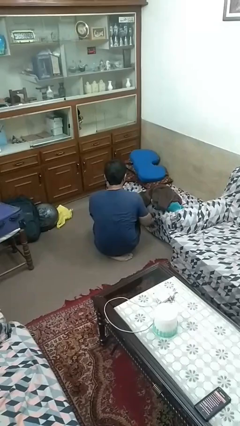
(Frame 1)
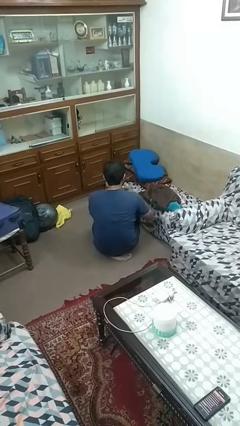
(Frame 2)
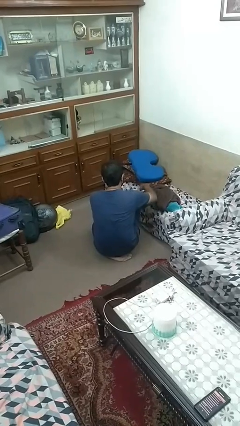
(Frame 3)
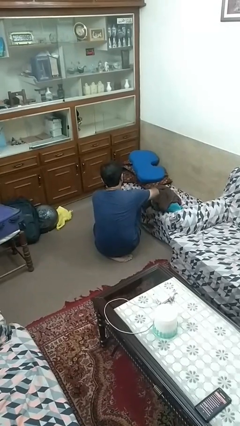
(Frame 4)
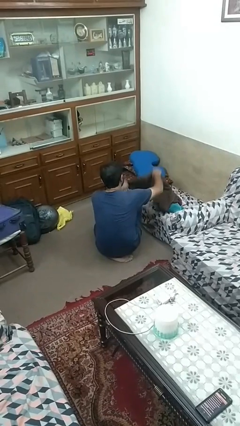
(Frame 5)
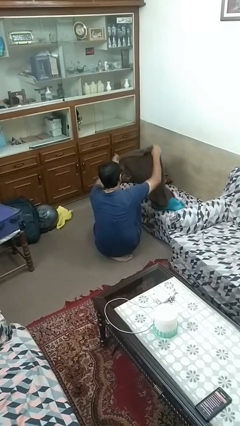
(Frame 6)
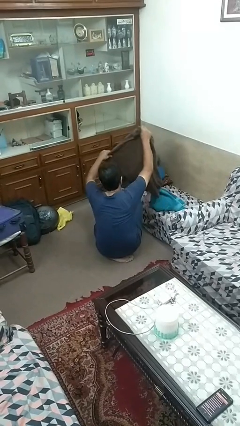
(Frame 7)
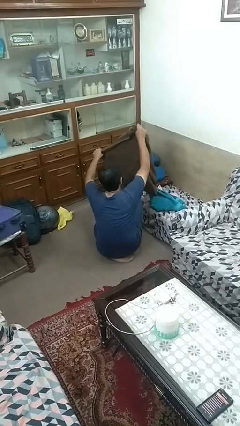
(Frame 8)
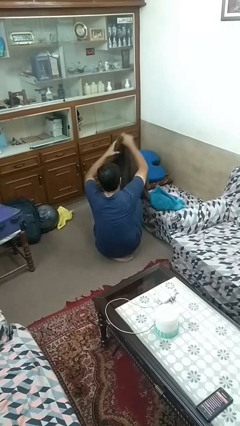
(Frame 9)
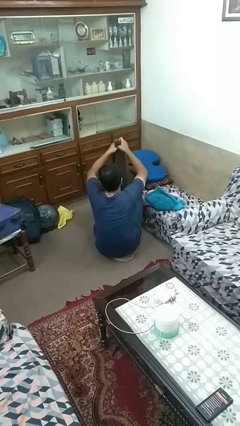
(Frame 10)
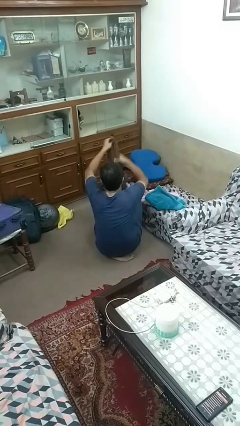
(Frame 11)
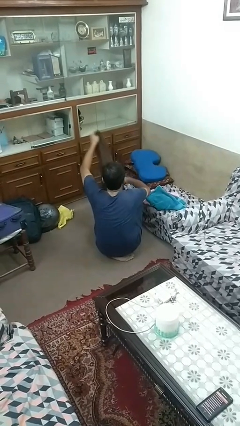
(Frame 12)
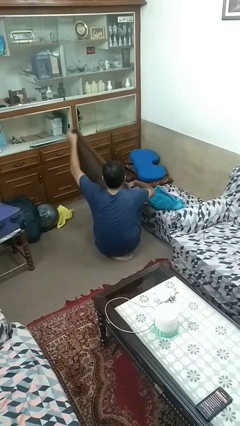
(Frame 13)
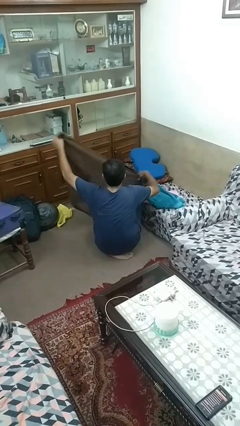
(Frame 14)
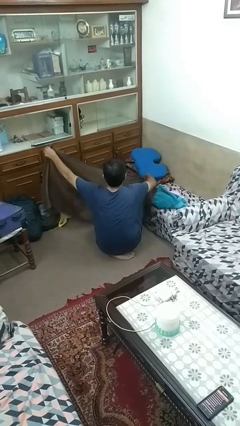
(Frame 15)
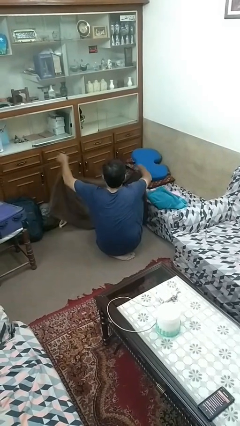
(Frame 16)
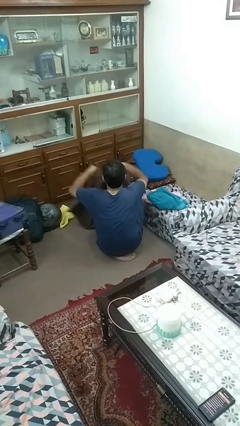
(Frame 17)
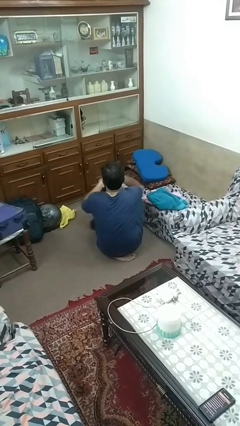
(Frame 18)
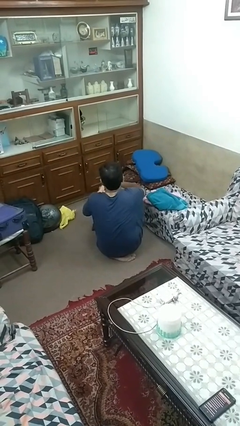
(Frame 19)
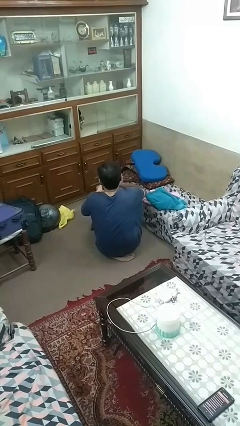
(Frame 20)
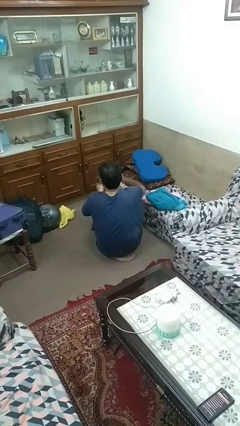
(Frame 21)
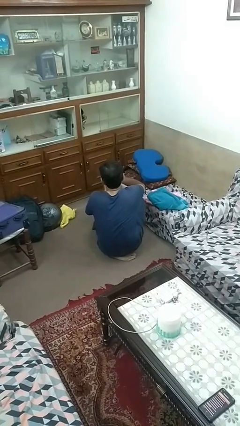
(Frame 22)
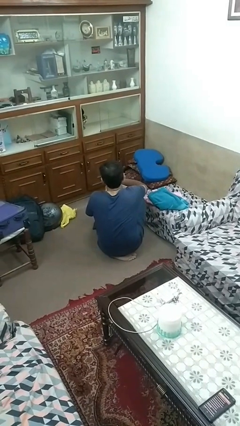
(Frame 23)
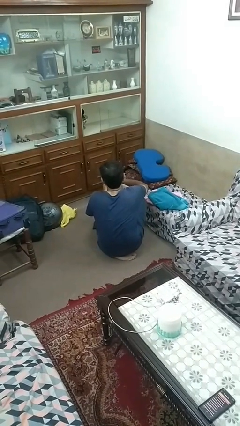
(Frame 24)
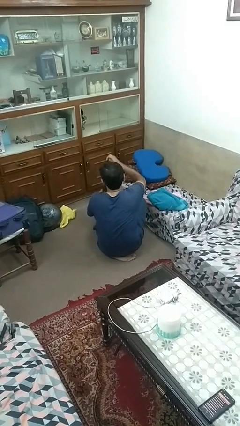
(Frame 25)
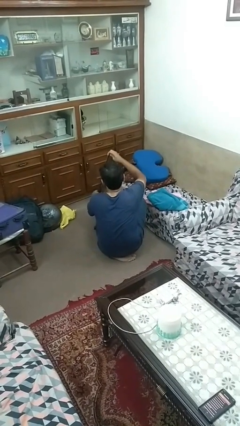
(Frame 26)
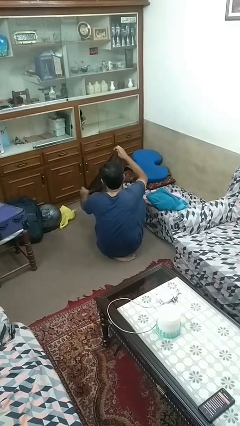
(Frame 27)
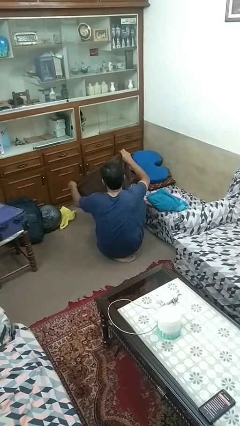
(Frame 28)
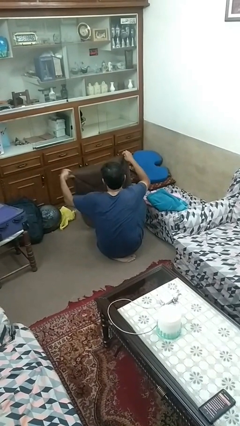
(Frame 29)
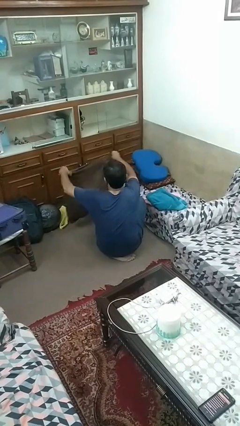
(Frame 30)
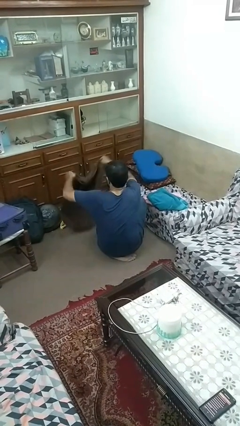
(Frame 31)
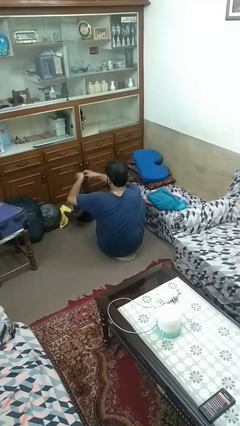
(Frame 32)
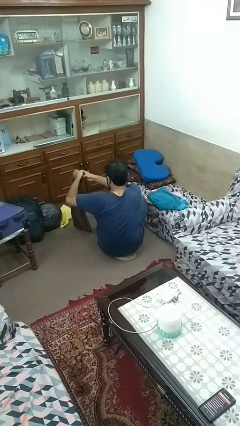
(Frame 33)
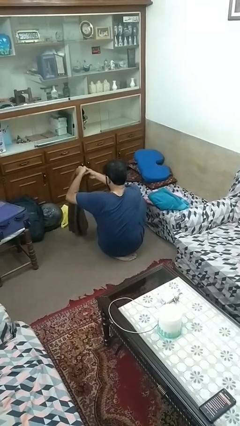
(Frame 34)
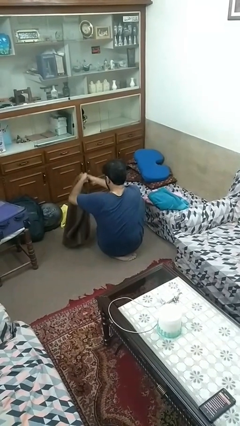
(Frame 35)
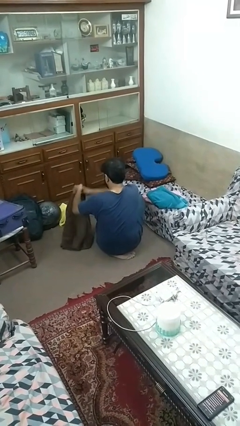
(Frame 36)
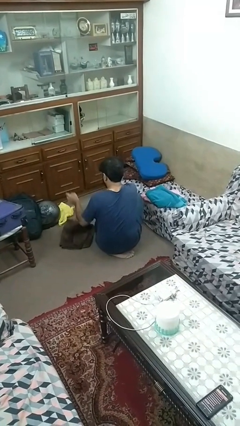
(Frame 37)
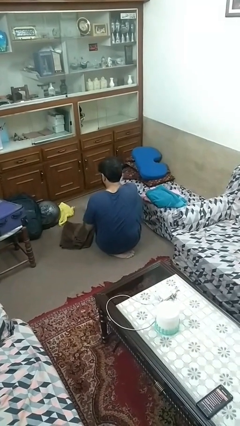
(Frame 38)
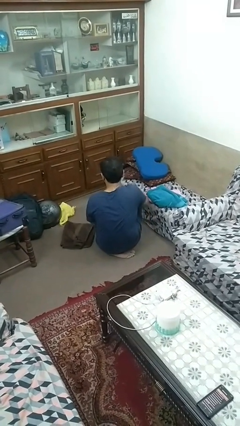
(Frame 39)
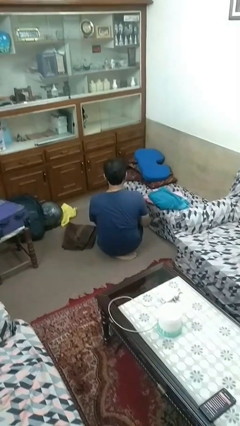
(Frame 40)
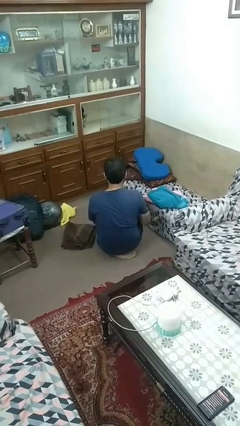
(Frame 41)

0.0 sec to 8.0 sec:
person folds towel

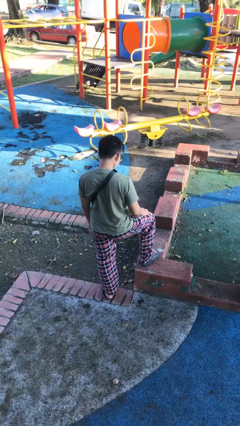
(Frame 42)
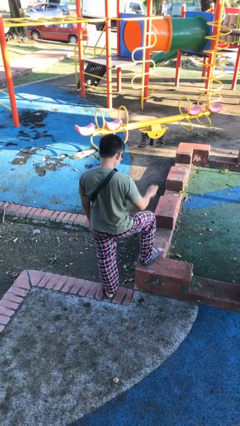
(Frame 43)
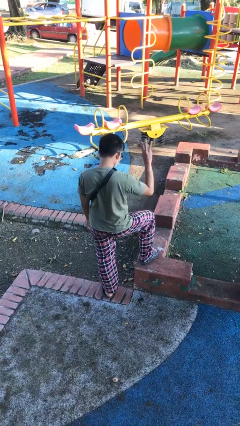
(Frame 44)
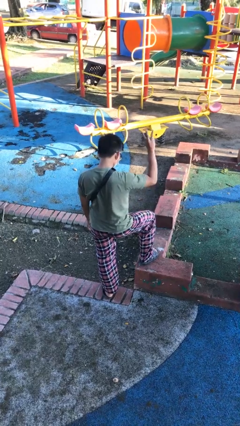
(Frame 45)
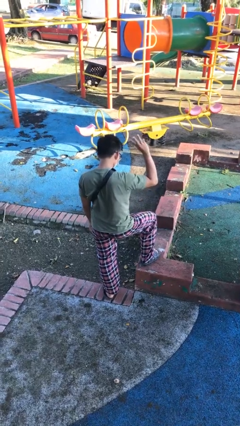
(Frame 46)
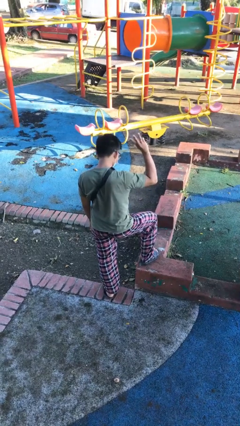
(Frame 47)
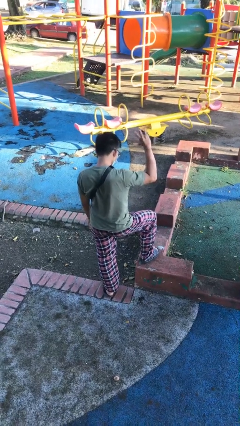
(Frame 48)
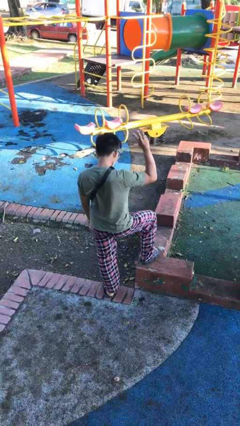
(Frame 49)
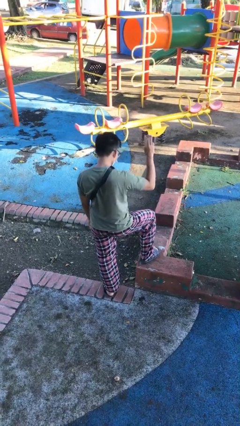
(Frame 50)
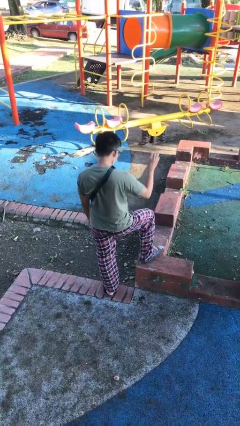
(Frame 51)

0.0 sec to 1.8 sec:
person gestures number three

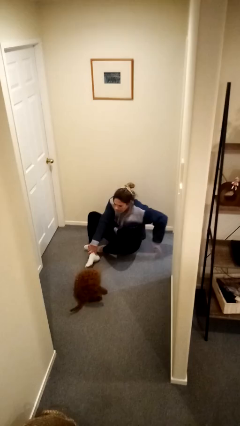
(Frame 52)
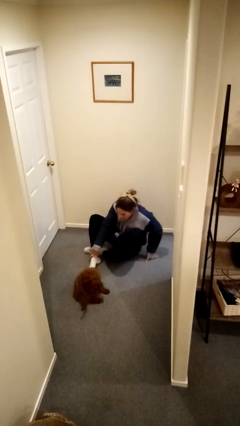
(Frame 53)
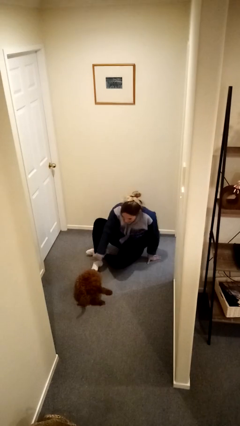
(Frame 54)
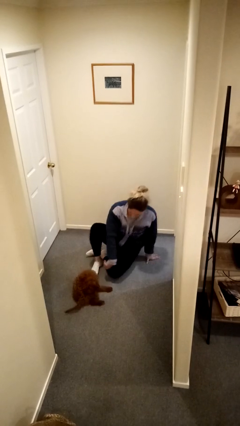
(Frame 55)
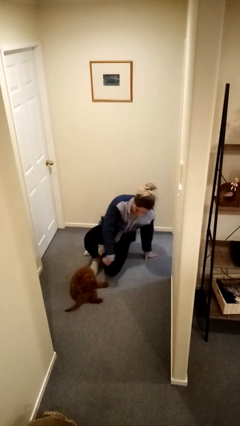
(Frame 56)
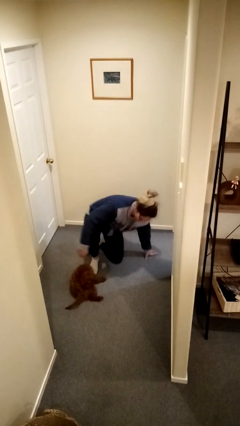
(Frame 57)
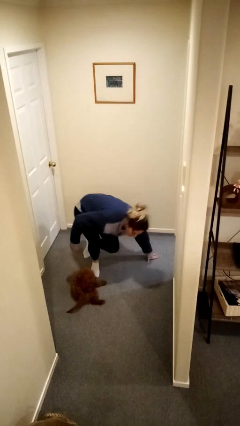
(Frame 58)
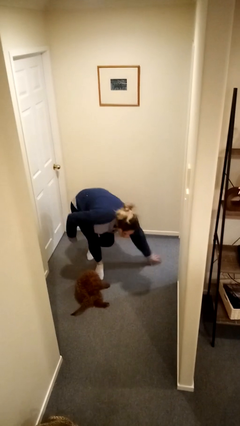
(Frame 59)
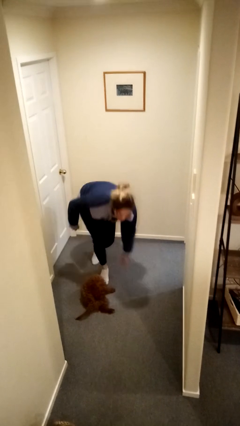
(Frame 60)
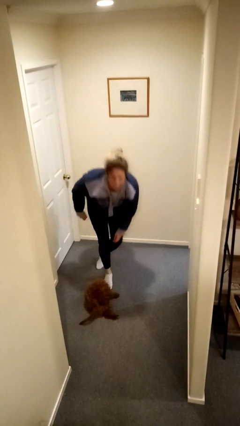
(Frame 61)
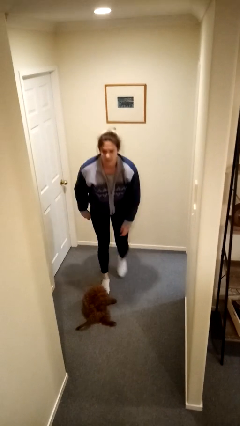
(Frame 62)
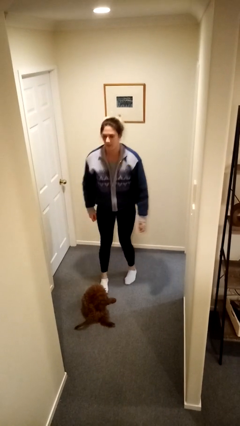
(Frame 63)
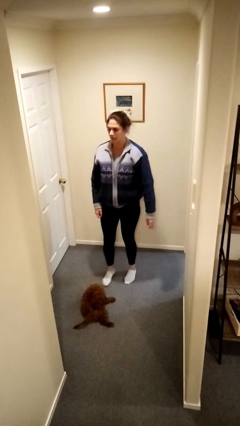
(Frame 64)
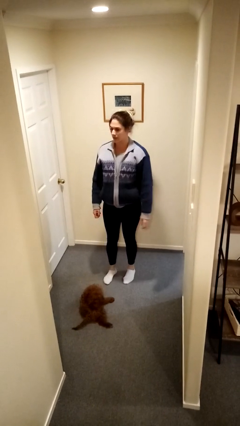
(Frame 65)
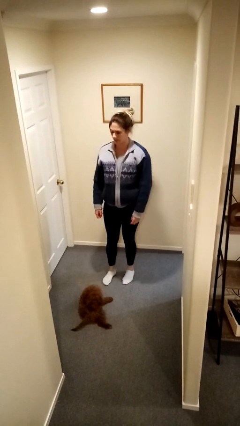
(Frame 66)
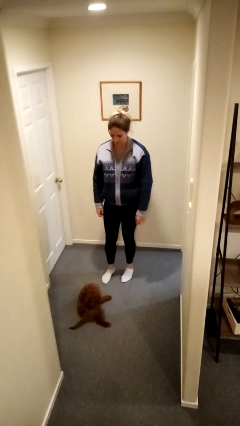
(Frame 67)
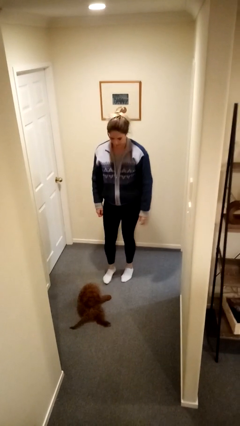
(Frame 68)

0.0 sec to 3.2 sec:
person stands up from floor

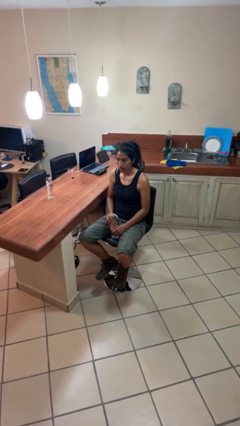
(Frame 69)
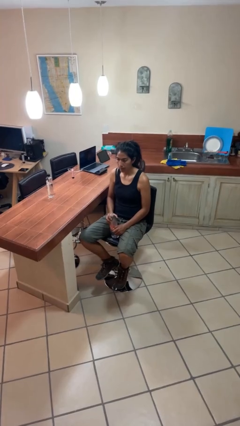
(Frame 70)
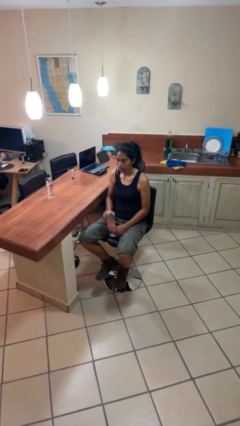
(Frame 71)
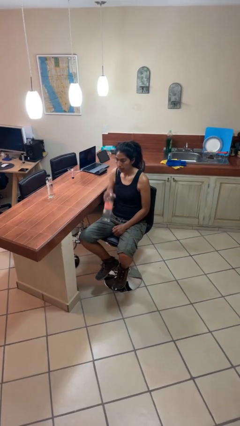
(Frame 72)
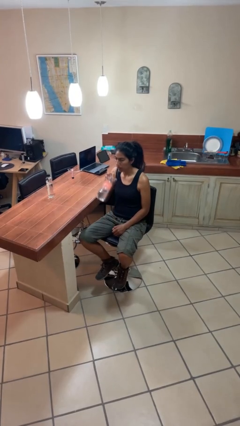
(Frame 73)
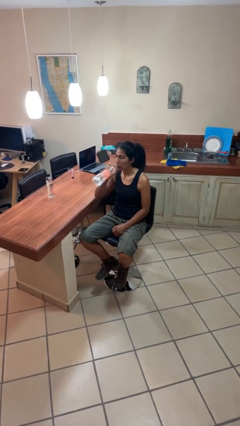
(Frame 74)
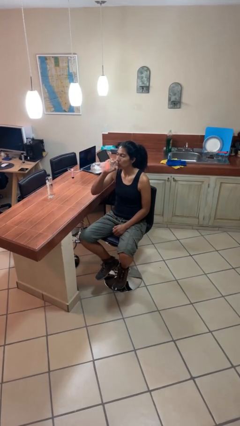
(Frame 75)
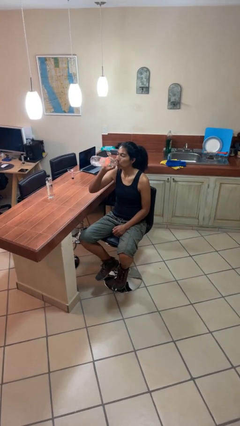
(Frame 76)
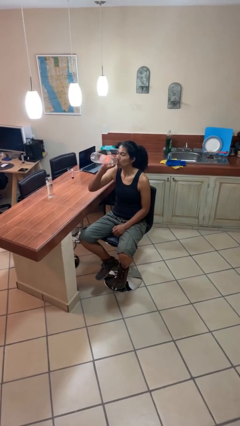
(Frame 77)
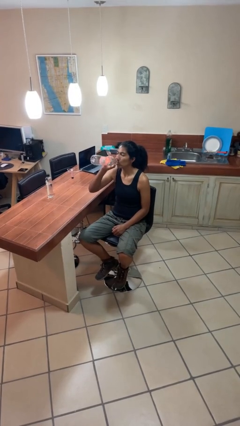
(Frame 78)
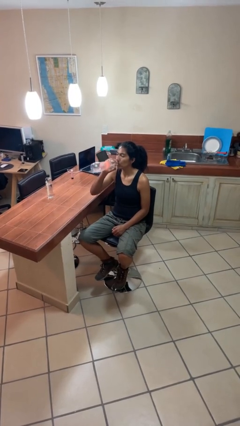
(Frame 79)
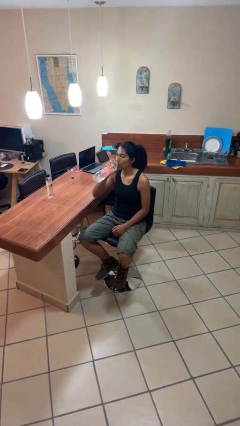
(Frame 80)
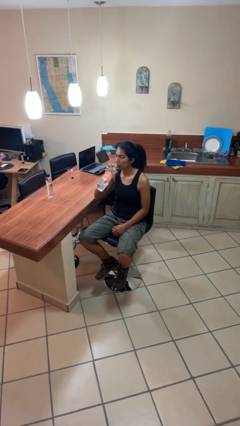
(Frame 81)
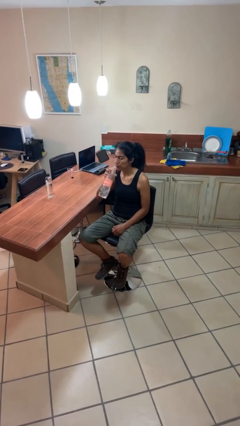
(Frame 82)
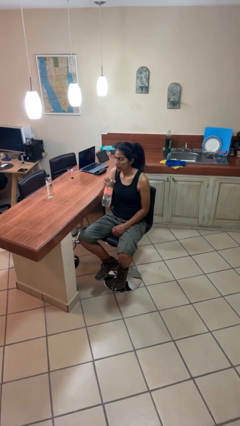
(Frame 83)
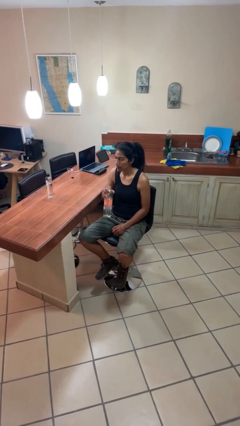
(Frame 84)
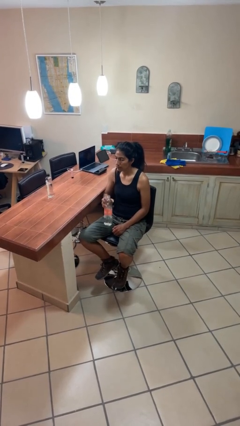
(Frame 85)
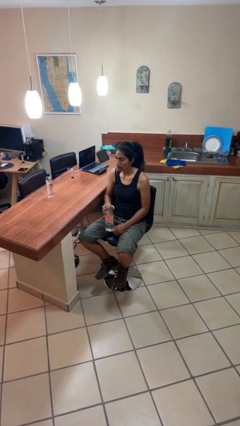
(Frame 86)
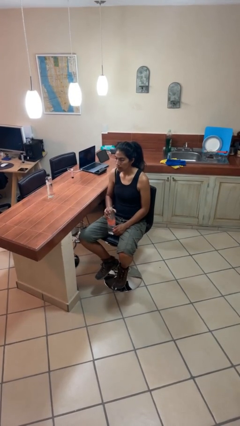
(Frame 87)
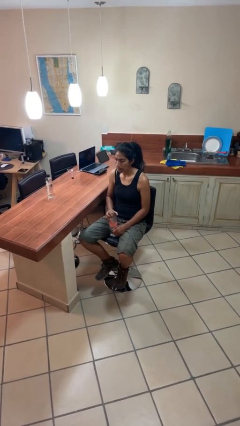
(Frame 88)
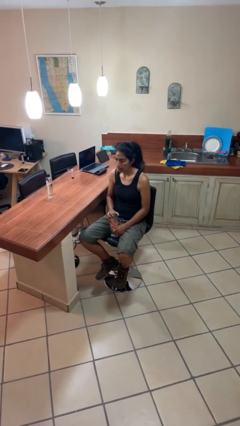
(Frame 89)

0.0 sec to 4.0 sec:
person drinks from bottle

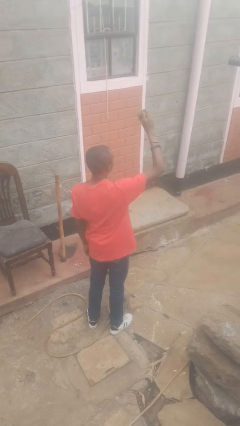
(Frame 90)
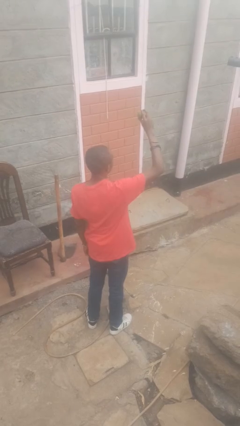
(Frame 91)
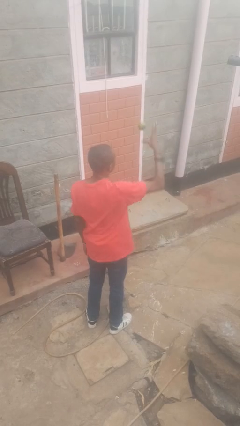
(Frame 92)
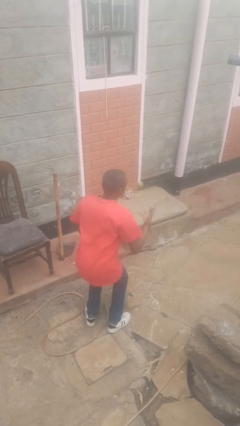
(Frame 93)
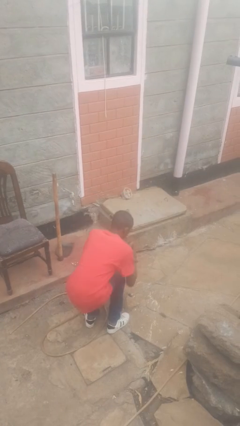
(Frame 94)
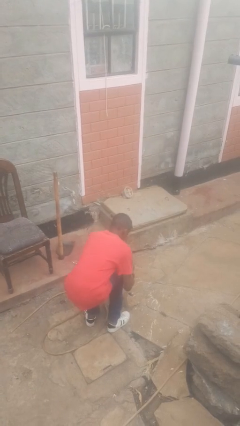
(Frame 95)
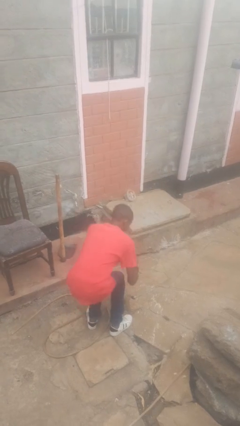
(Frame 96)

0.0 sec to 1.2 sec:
person drops object
